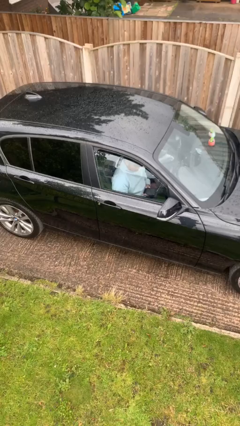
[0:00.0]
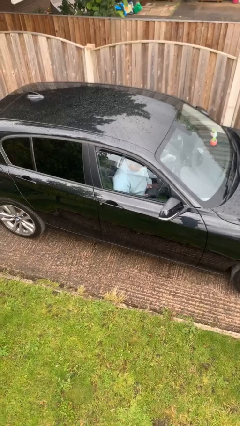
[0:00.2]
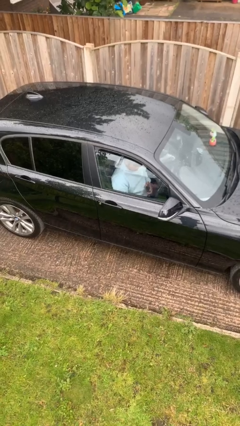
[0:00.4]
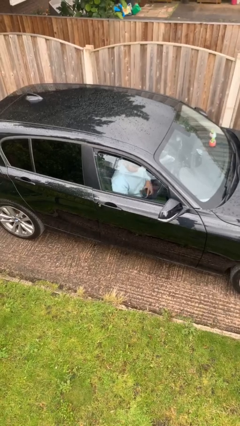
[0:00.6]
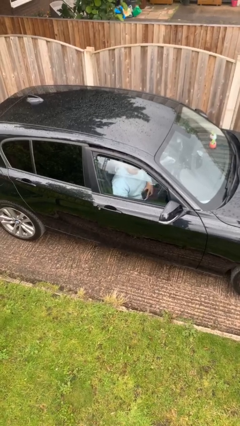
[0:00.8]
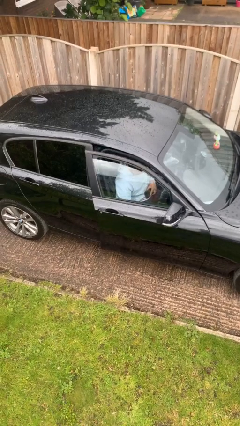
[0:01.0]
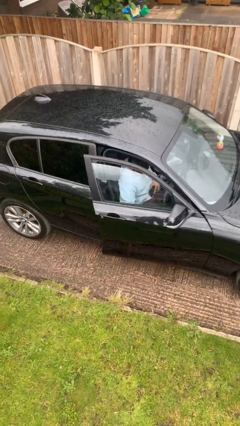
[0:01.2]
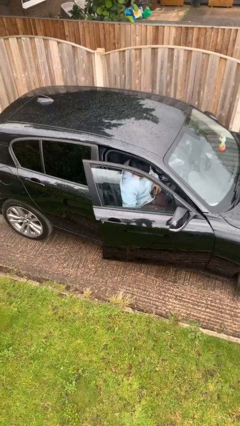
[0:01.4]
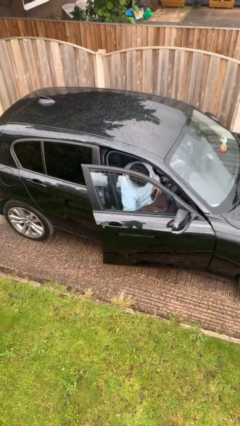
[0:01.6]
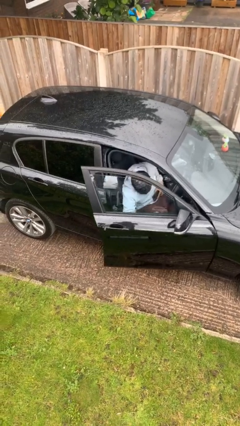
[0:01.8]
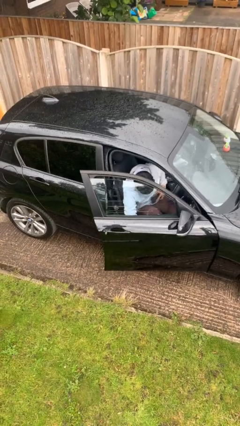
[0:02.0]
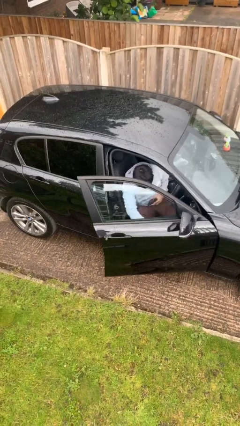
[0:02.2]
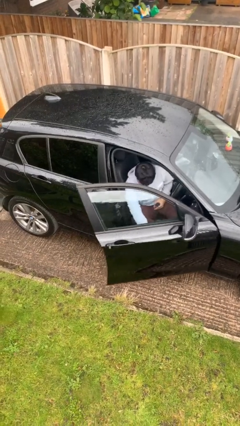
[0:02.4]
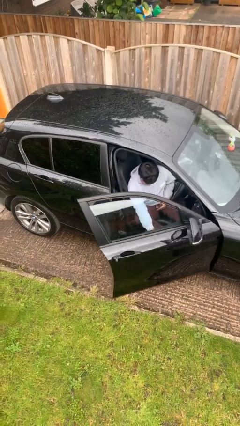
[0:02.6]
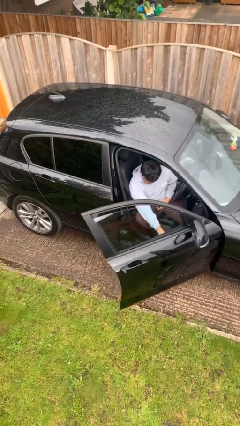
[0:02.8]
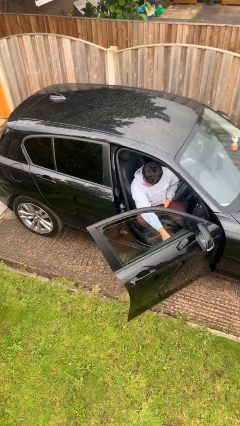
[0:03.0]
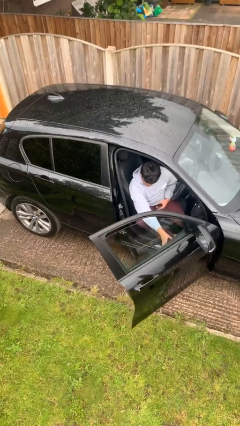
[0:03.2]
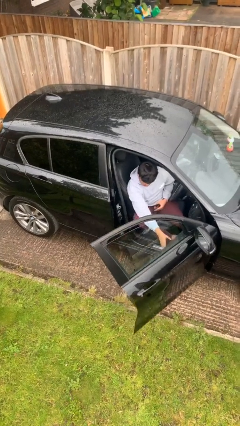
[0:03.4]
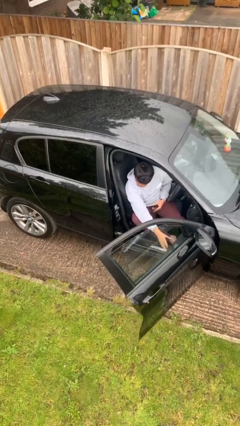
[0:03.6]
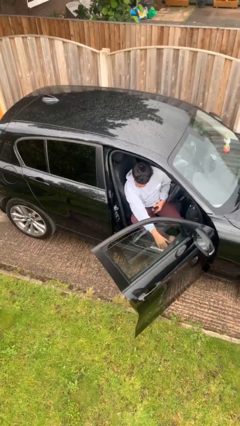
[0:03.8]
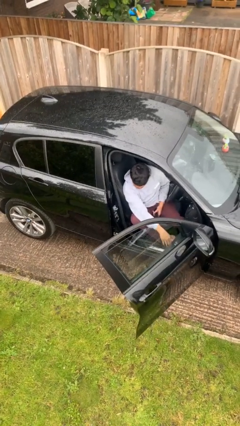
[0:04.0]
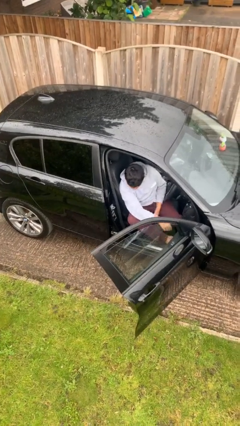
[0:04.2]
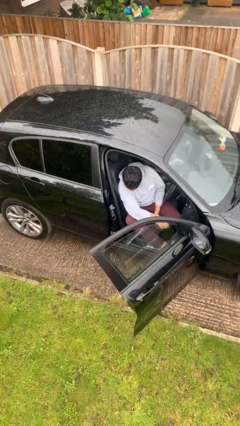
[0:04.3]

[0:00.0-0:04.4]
person opens car door

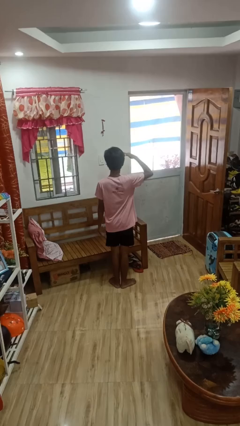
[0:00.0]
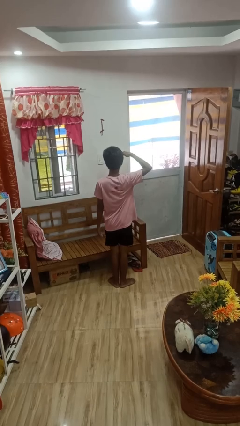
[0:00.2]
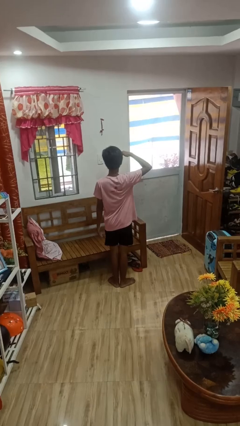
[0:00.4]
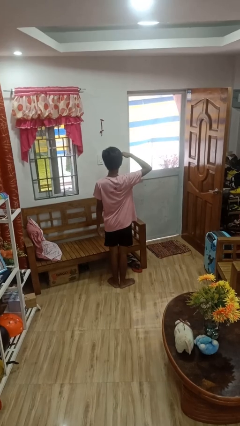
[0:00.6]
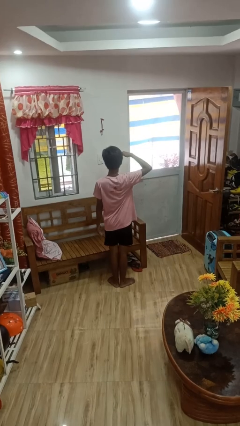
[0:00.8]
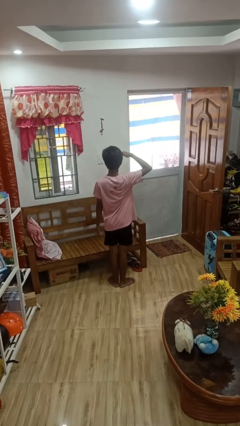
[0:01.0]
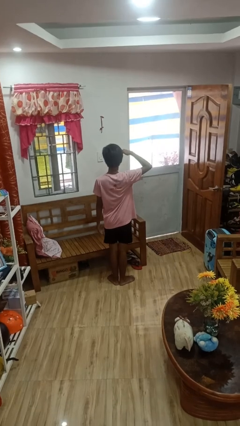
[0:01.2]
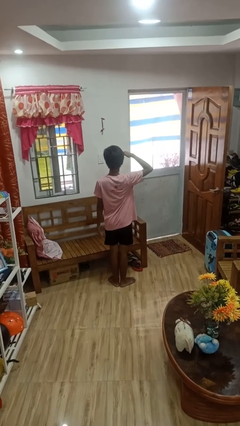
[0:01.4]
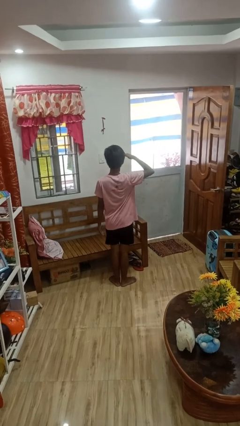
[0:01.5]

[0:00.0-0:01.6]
person salutes

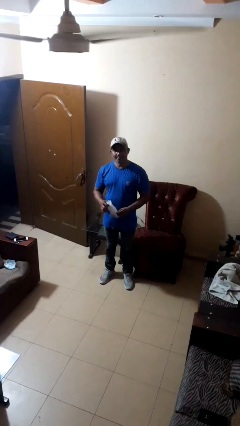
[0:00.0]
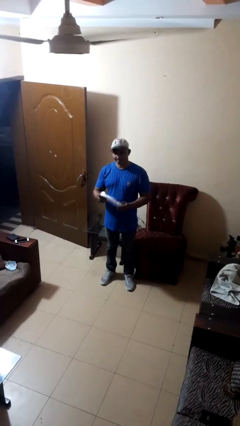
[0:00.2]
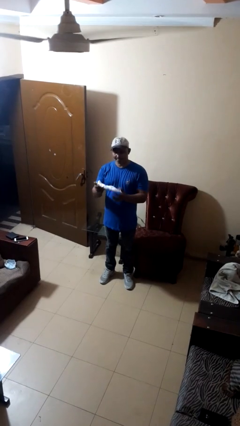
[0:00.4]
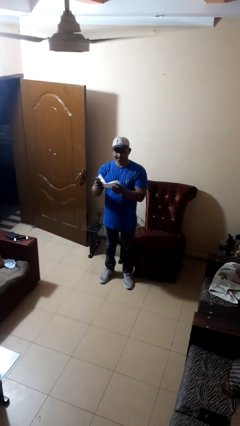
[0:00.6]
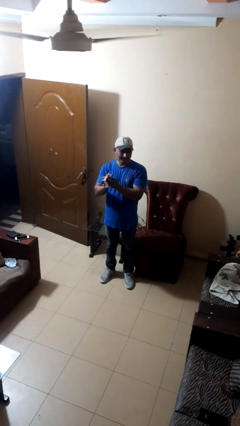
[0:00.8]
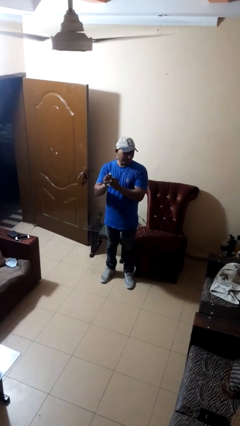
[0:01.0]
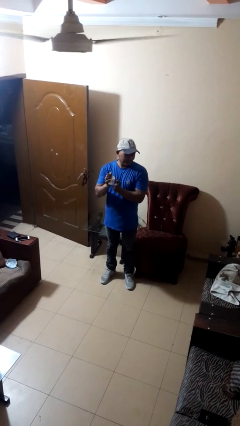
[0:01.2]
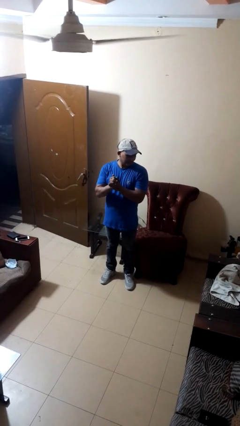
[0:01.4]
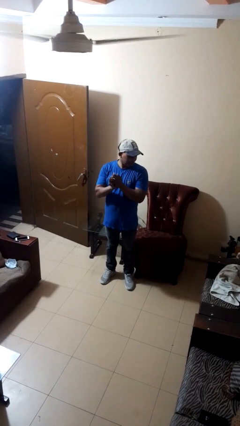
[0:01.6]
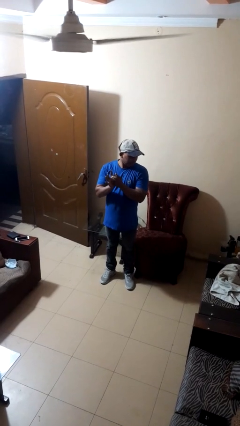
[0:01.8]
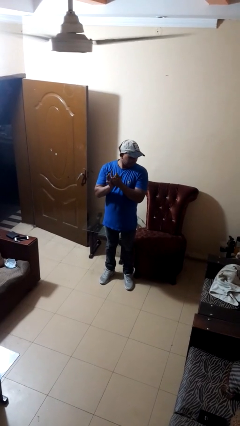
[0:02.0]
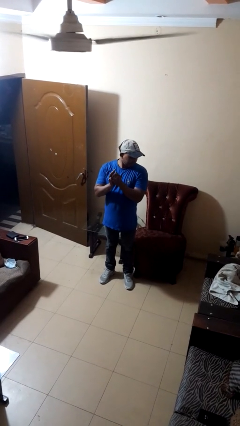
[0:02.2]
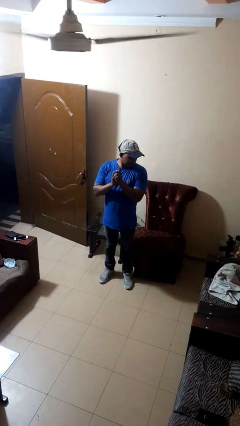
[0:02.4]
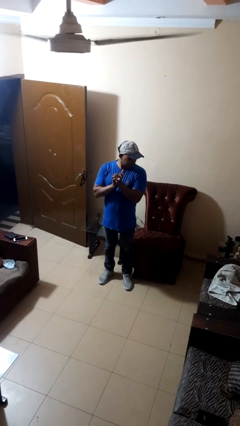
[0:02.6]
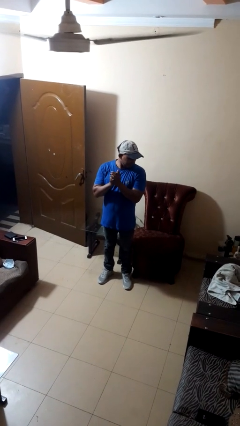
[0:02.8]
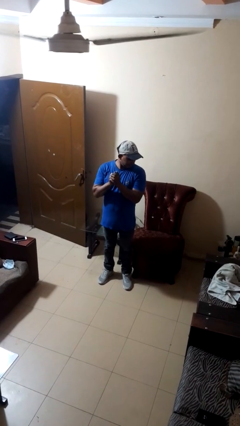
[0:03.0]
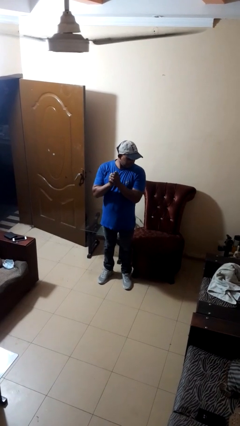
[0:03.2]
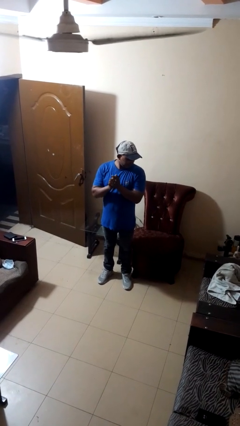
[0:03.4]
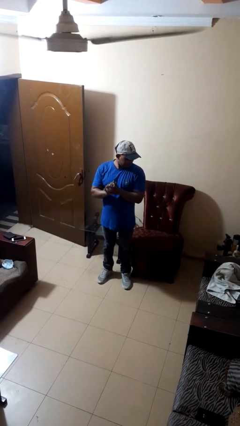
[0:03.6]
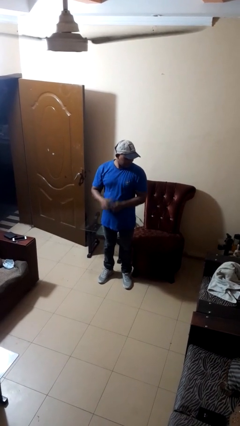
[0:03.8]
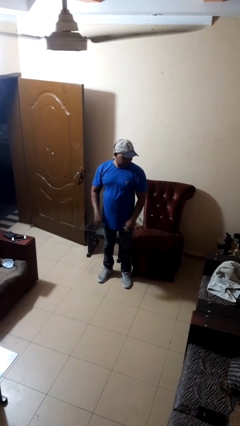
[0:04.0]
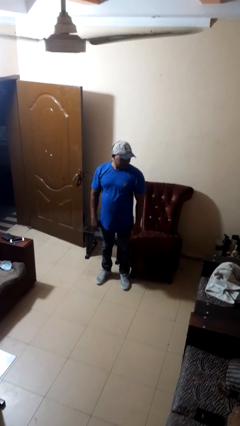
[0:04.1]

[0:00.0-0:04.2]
person crumples paper

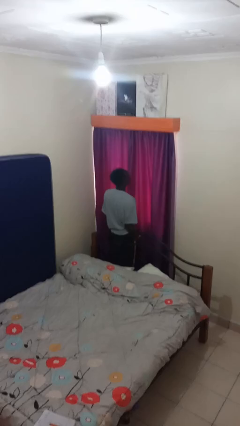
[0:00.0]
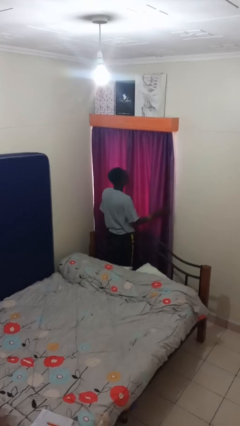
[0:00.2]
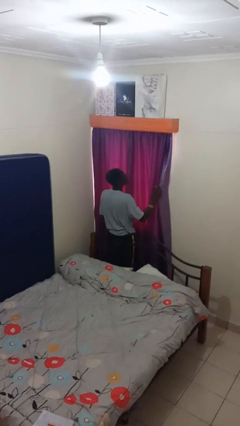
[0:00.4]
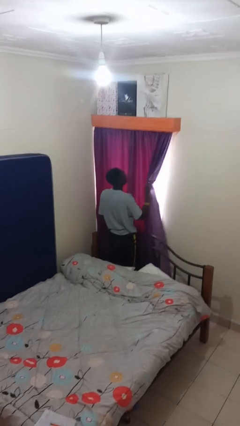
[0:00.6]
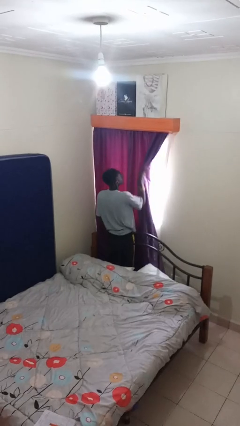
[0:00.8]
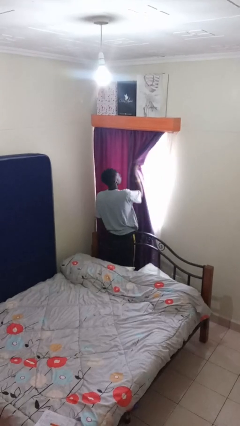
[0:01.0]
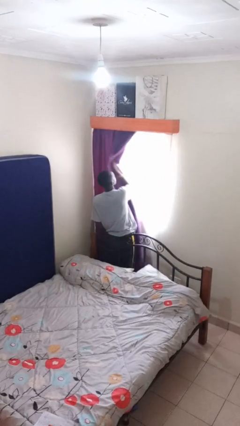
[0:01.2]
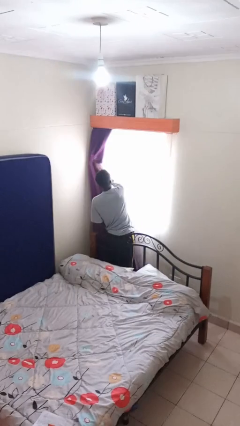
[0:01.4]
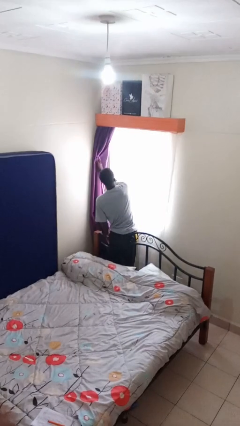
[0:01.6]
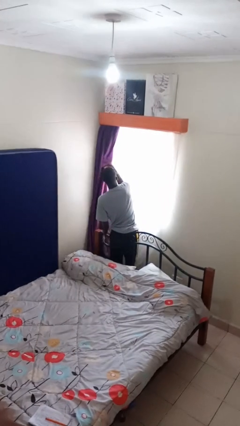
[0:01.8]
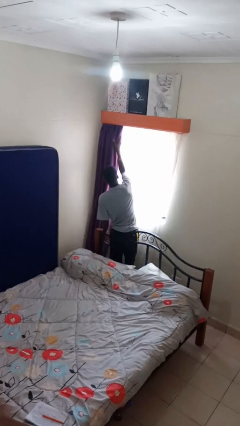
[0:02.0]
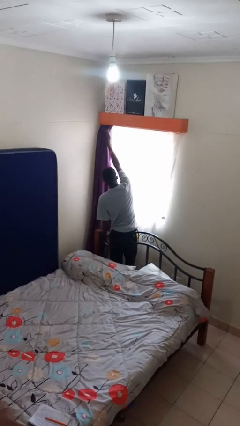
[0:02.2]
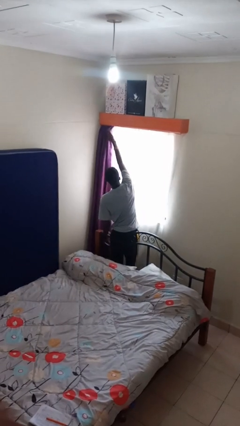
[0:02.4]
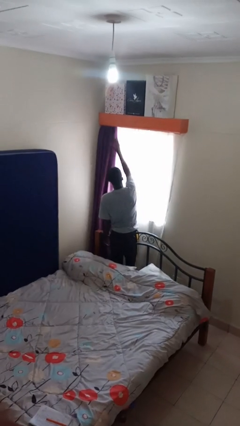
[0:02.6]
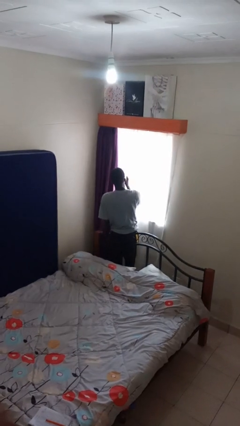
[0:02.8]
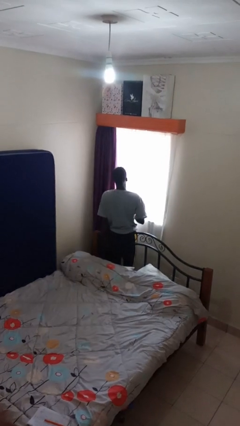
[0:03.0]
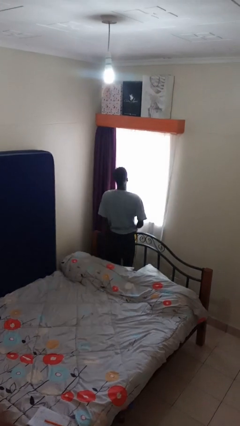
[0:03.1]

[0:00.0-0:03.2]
person opens curtains

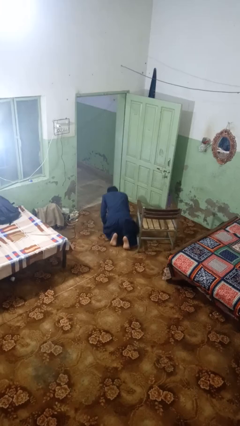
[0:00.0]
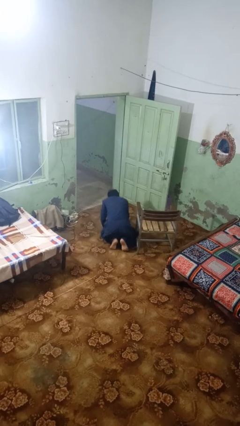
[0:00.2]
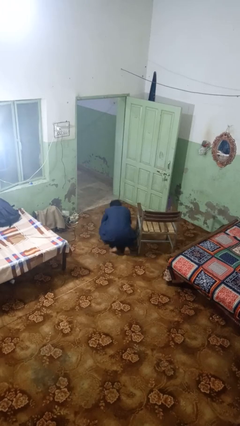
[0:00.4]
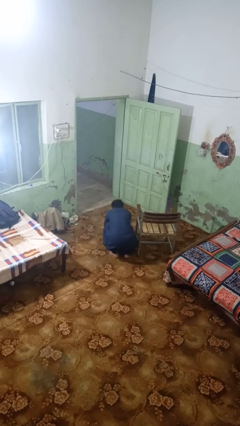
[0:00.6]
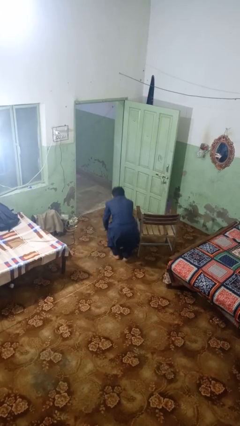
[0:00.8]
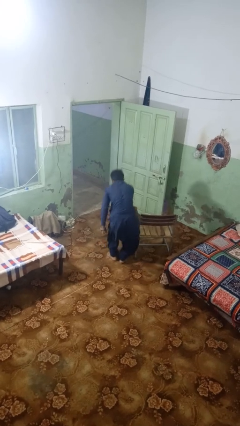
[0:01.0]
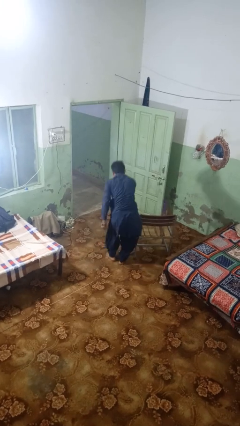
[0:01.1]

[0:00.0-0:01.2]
person stands up from floor

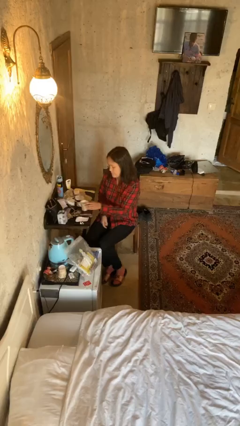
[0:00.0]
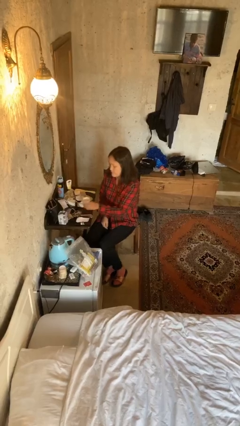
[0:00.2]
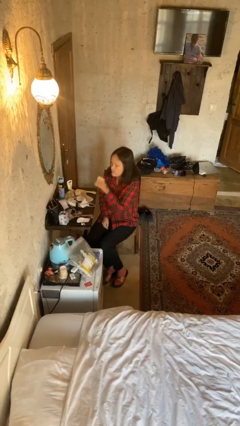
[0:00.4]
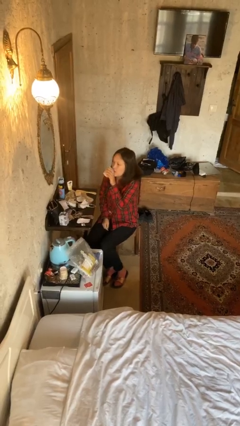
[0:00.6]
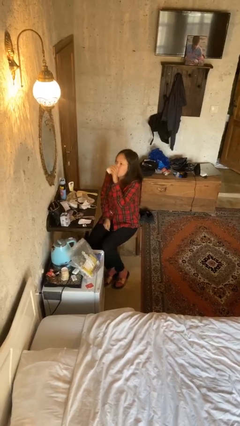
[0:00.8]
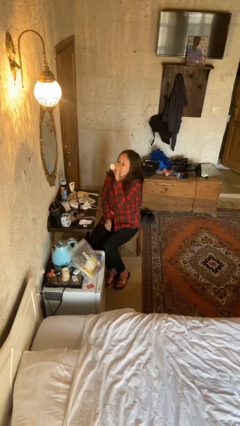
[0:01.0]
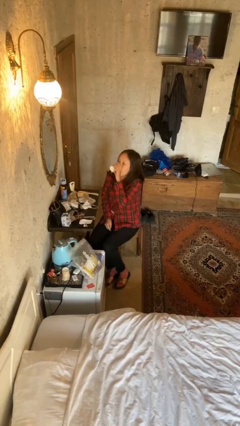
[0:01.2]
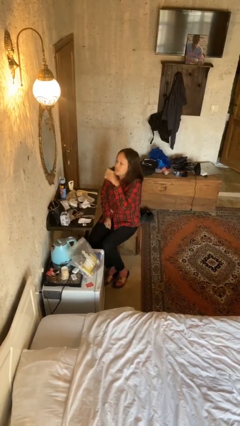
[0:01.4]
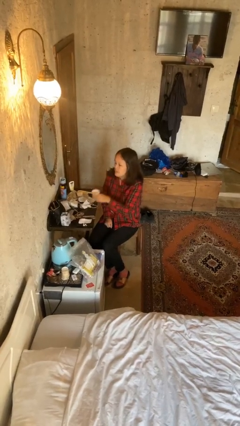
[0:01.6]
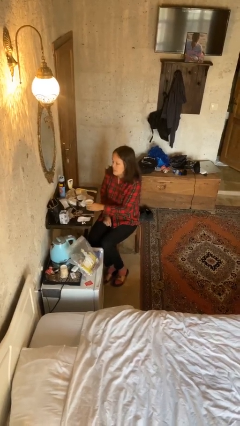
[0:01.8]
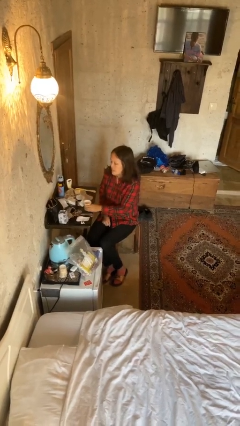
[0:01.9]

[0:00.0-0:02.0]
person drinks from cup

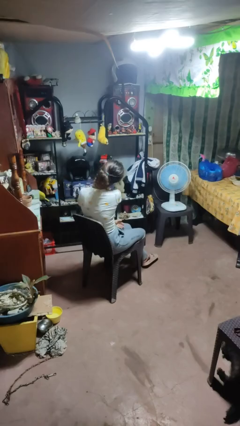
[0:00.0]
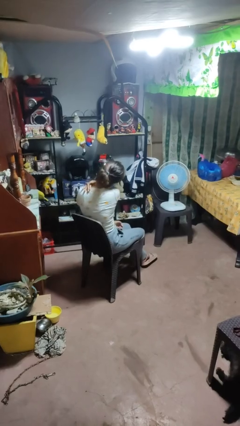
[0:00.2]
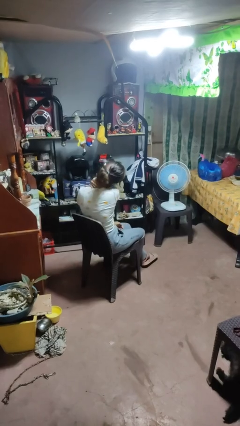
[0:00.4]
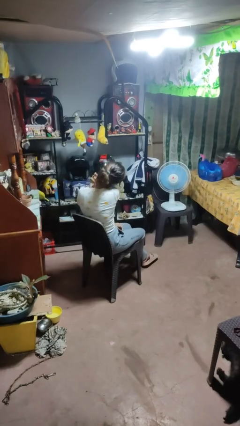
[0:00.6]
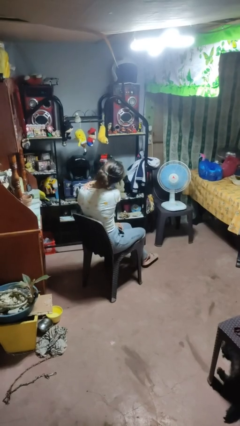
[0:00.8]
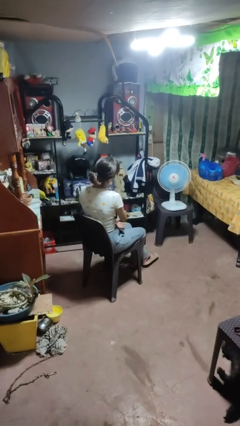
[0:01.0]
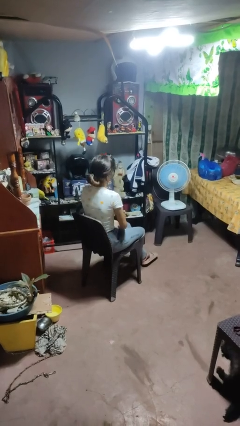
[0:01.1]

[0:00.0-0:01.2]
person rubs neck
